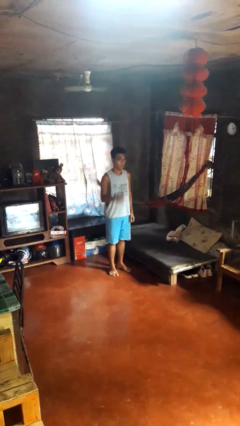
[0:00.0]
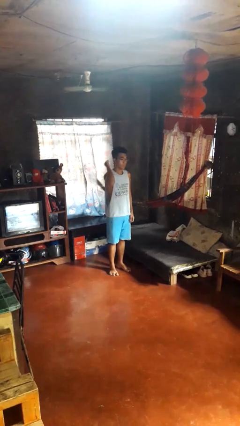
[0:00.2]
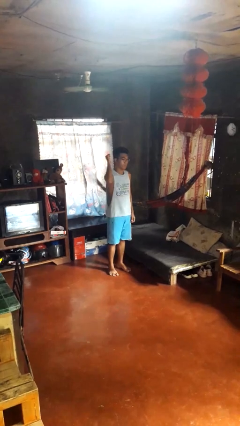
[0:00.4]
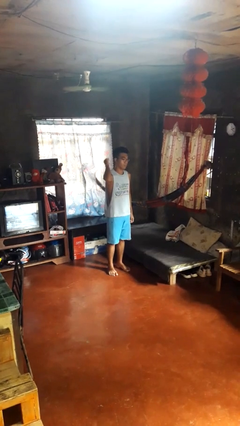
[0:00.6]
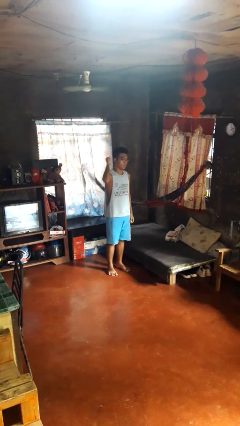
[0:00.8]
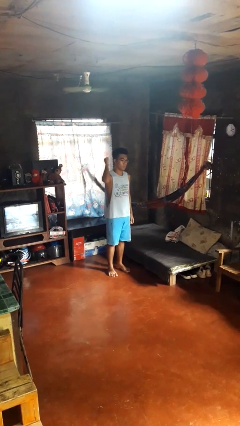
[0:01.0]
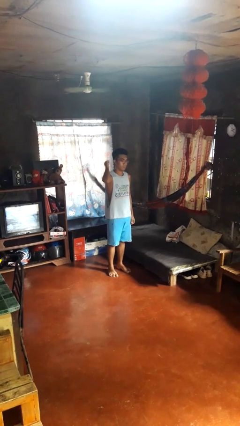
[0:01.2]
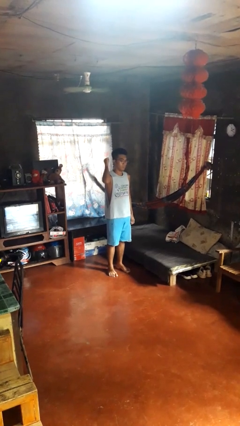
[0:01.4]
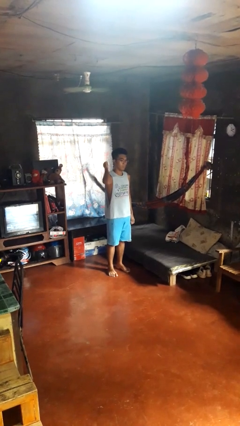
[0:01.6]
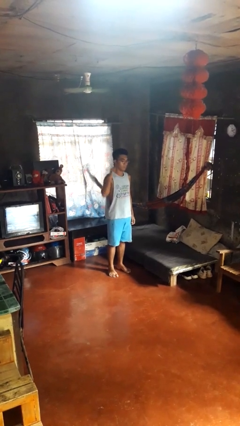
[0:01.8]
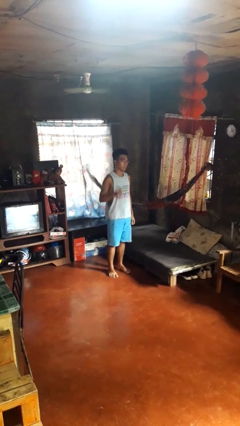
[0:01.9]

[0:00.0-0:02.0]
person gestures behind me

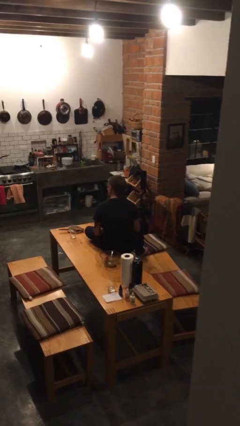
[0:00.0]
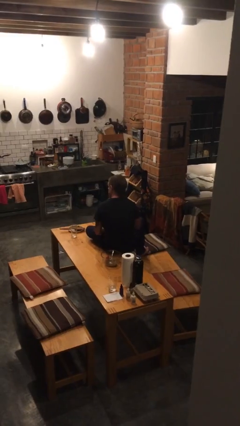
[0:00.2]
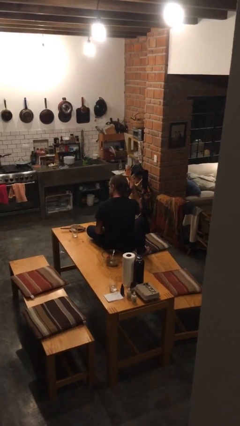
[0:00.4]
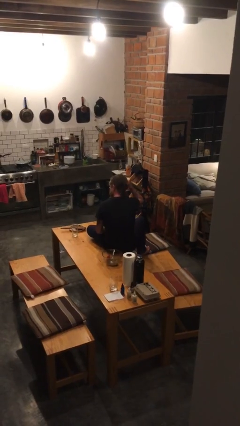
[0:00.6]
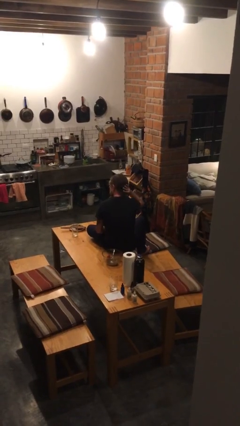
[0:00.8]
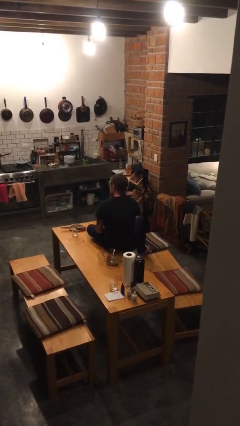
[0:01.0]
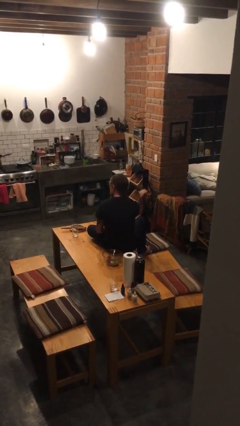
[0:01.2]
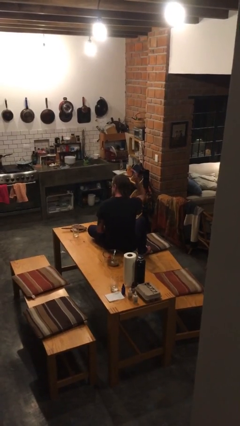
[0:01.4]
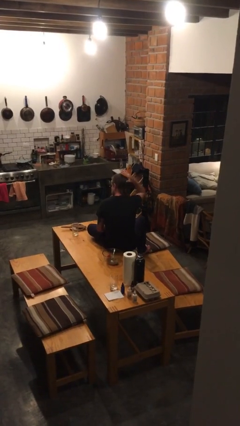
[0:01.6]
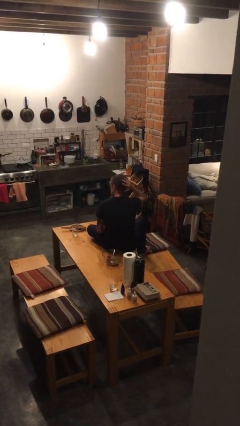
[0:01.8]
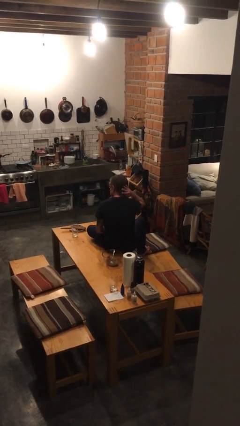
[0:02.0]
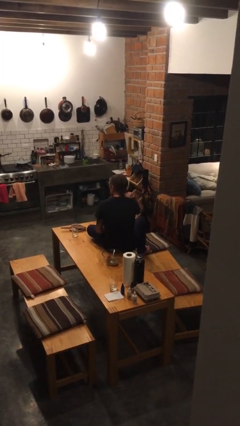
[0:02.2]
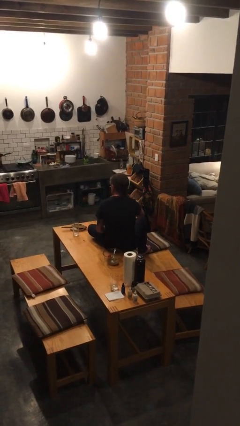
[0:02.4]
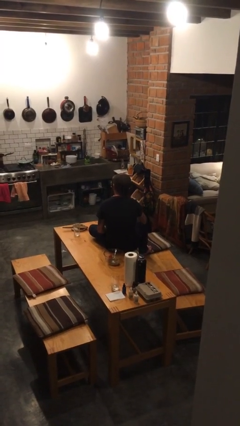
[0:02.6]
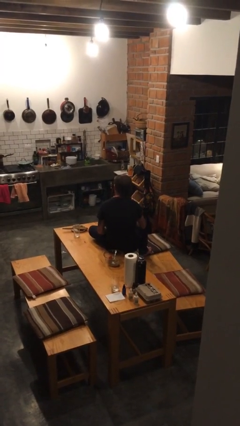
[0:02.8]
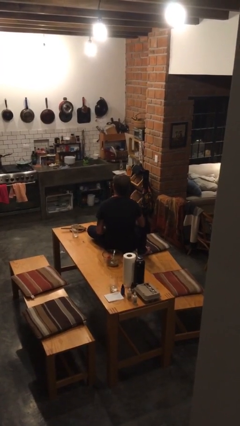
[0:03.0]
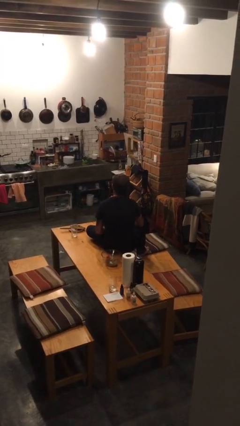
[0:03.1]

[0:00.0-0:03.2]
person strokes hair

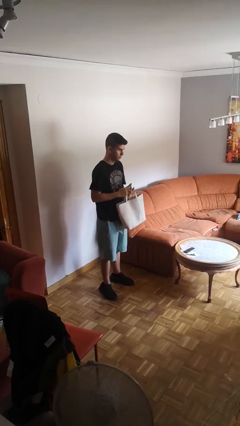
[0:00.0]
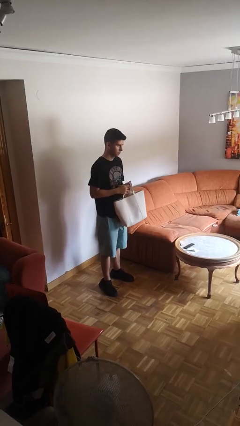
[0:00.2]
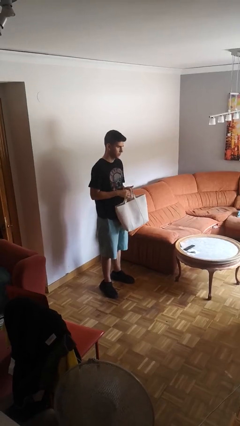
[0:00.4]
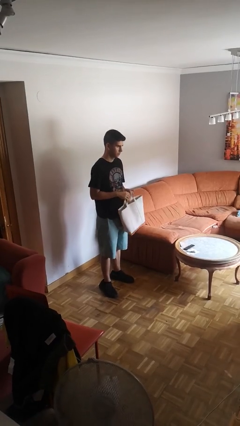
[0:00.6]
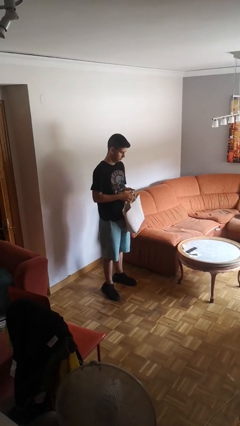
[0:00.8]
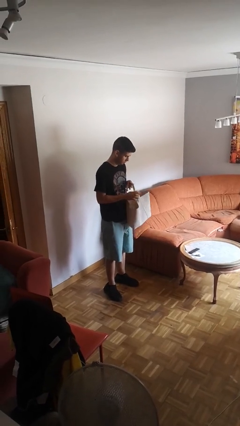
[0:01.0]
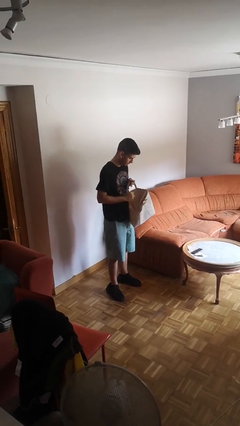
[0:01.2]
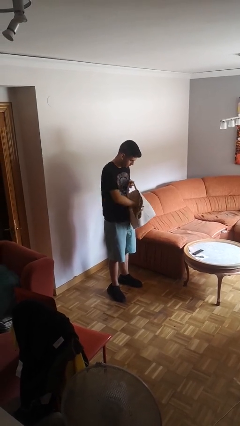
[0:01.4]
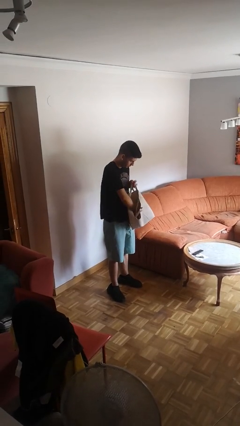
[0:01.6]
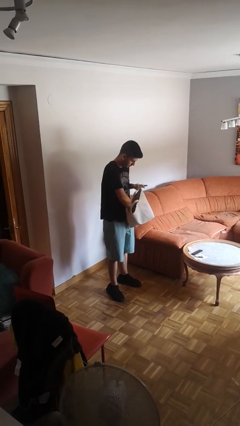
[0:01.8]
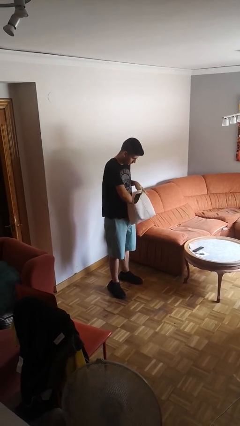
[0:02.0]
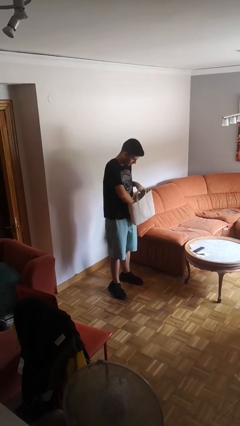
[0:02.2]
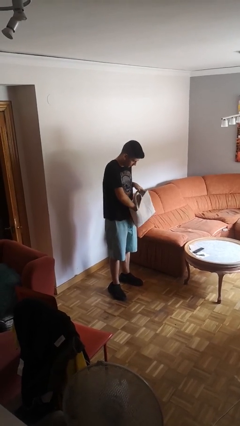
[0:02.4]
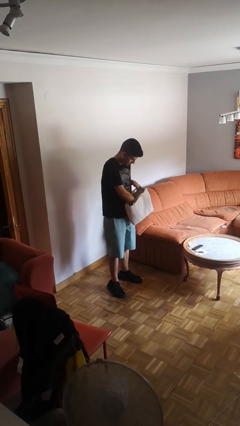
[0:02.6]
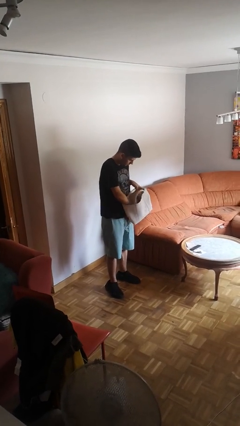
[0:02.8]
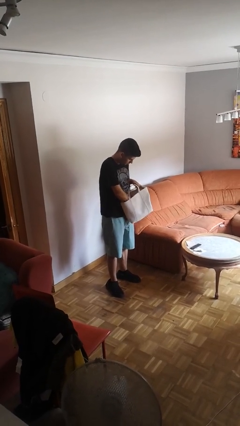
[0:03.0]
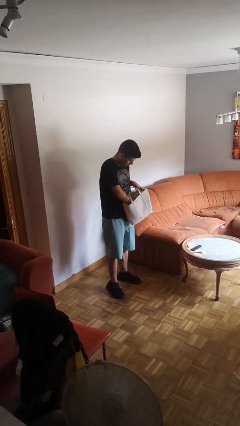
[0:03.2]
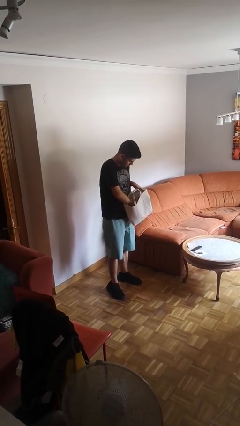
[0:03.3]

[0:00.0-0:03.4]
person searches in purse

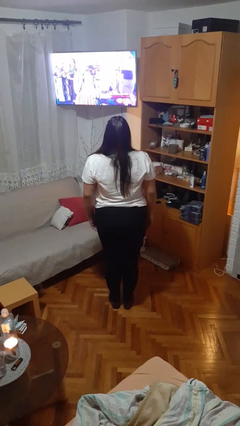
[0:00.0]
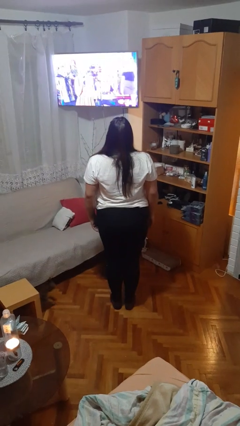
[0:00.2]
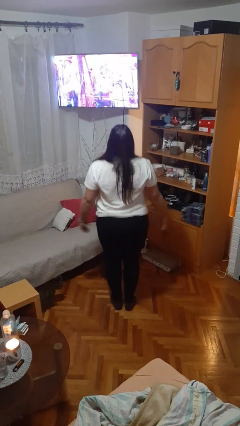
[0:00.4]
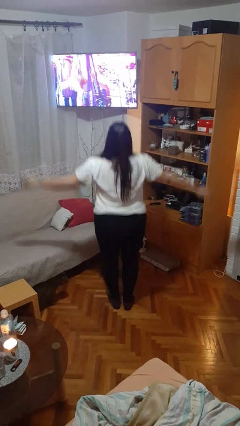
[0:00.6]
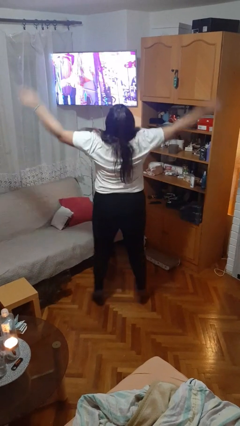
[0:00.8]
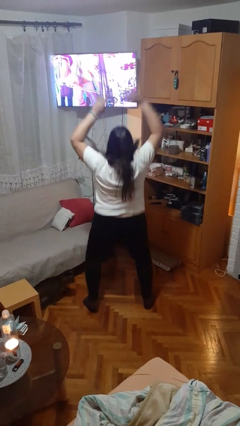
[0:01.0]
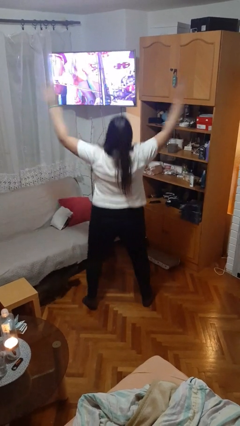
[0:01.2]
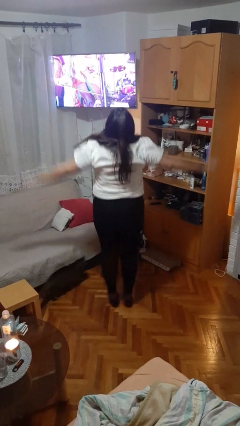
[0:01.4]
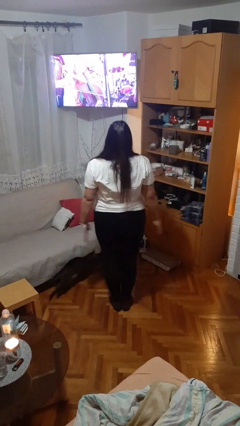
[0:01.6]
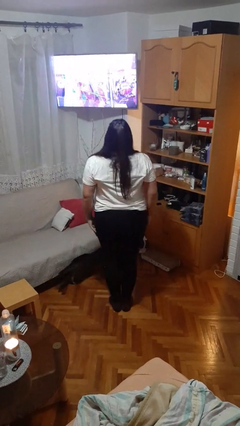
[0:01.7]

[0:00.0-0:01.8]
person exercises with jumping jacks

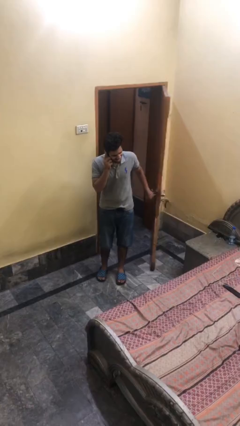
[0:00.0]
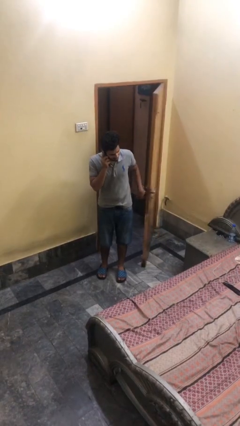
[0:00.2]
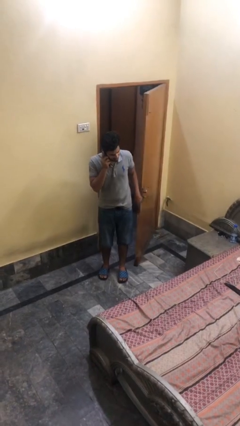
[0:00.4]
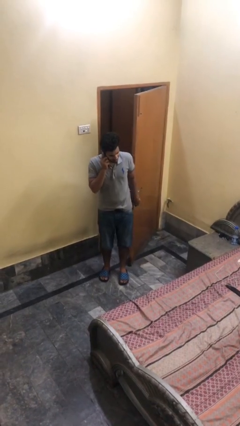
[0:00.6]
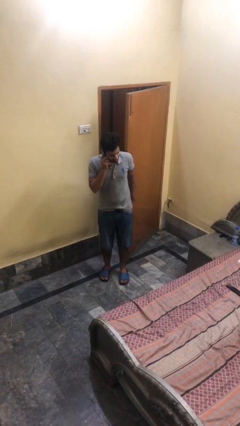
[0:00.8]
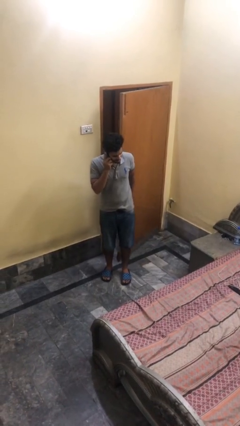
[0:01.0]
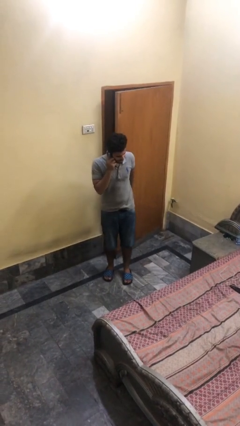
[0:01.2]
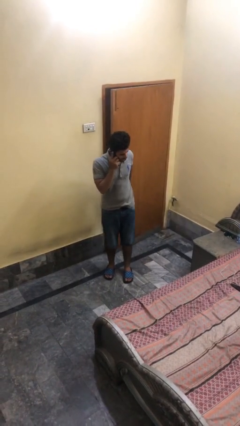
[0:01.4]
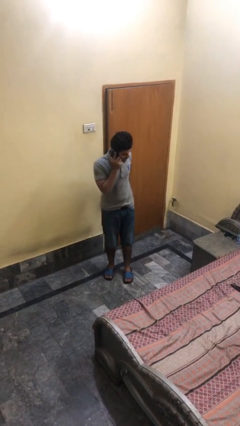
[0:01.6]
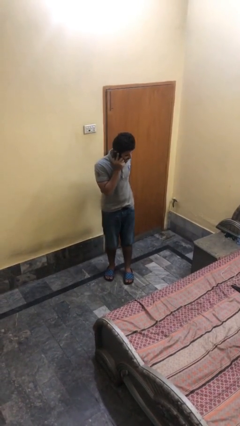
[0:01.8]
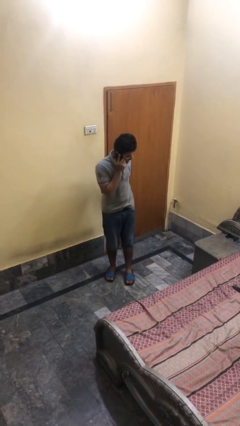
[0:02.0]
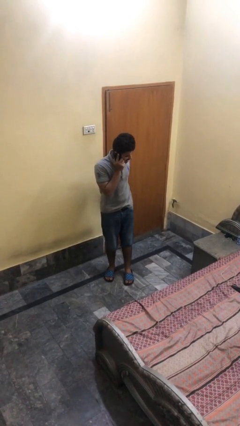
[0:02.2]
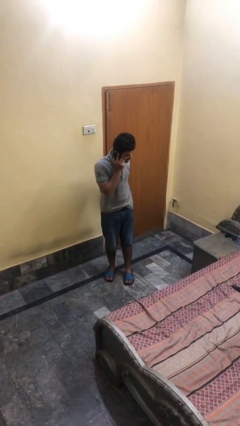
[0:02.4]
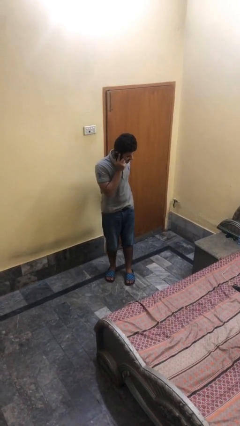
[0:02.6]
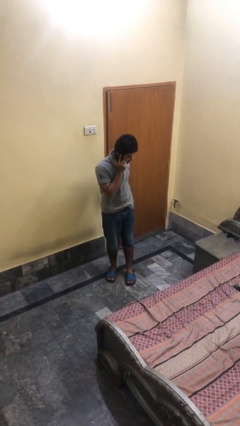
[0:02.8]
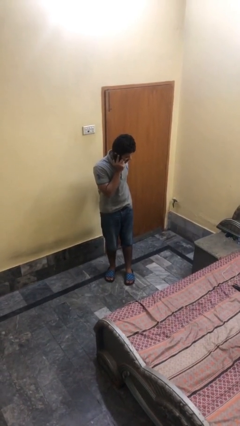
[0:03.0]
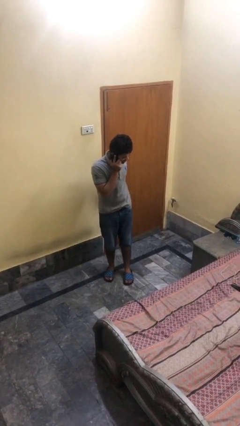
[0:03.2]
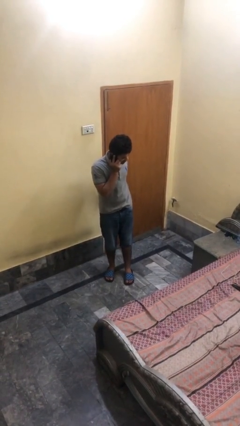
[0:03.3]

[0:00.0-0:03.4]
person closes facility door

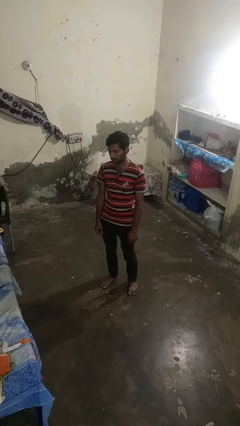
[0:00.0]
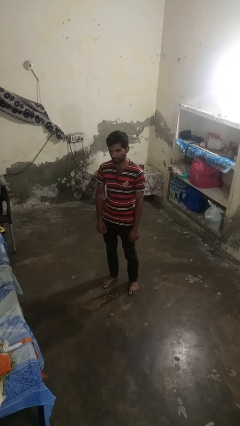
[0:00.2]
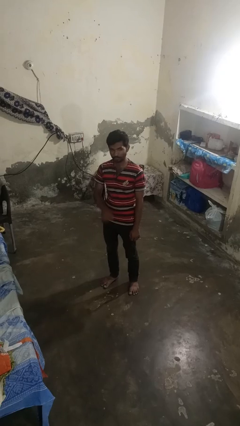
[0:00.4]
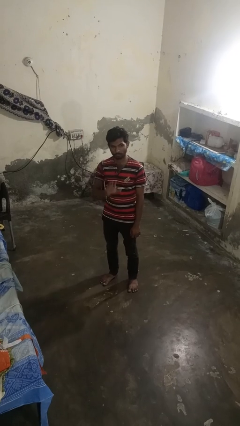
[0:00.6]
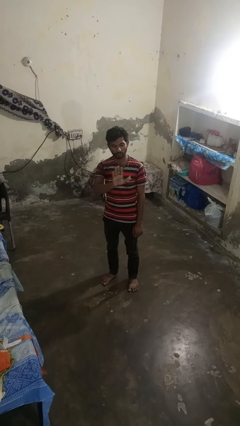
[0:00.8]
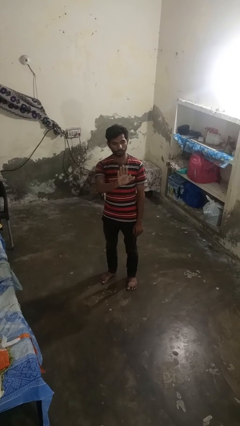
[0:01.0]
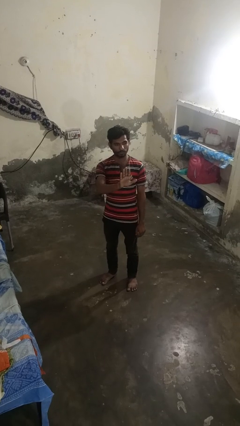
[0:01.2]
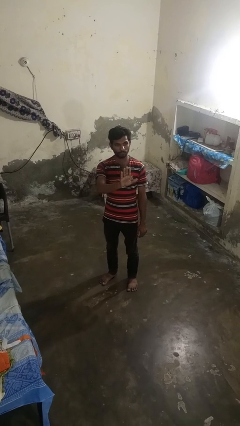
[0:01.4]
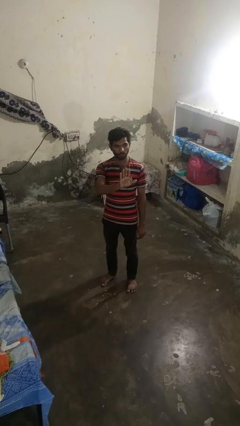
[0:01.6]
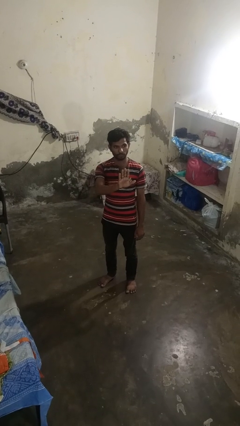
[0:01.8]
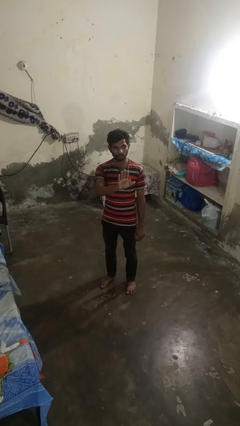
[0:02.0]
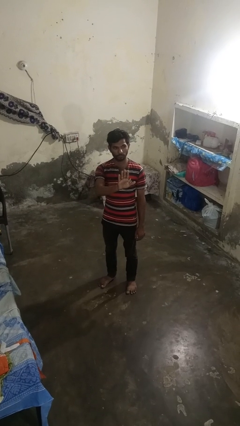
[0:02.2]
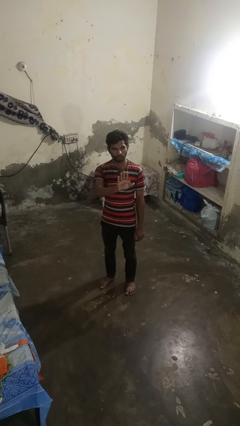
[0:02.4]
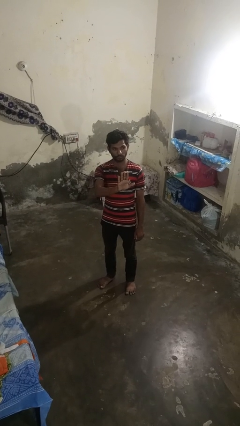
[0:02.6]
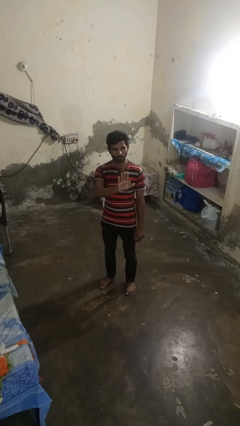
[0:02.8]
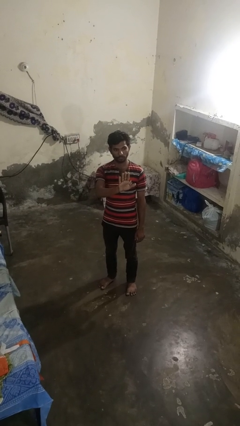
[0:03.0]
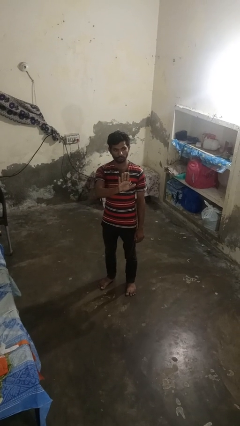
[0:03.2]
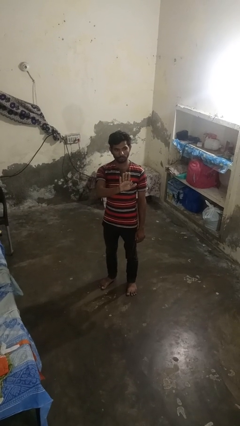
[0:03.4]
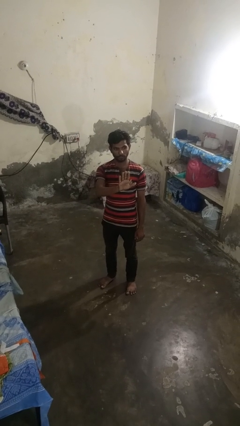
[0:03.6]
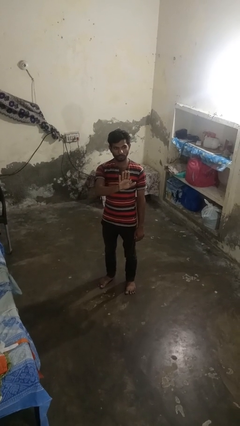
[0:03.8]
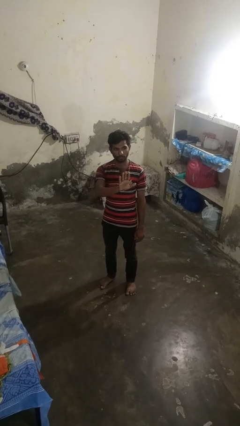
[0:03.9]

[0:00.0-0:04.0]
person gestures stop
